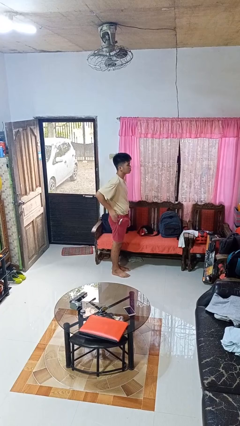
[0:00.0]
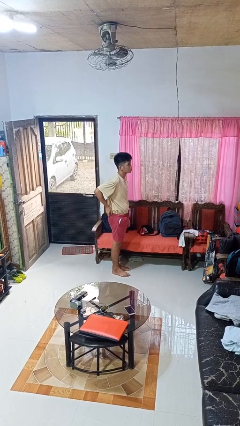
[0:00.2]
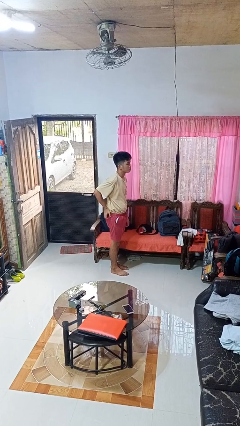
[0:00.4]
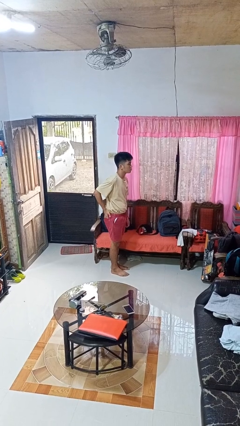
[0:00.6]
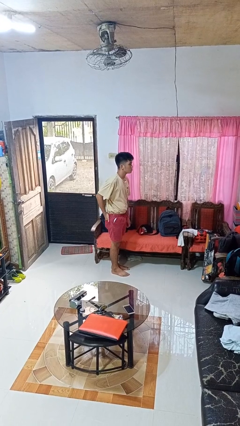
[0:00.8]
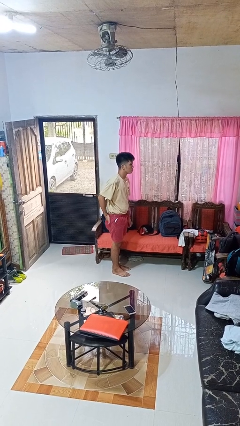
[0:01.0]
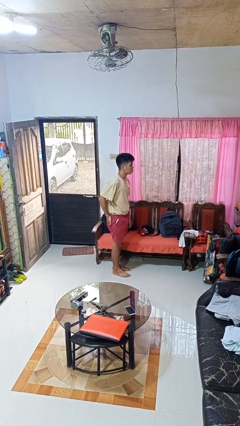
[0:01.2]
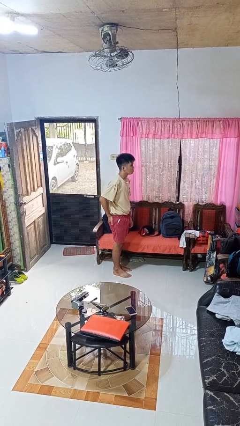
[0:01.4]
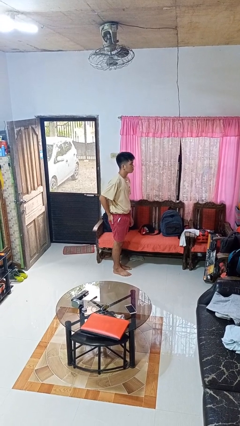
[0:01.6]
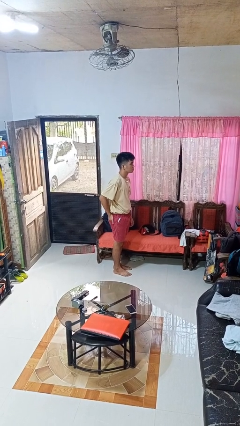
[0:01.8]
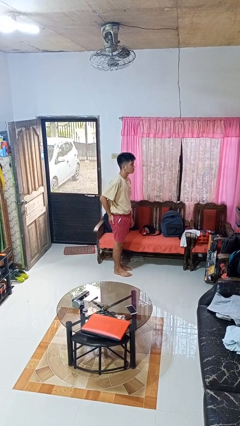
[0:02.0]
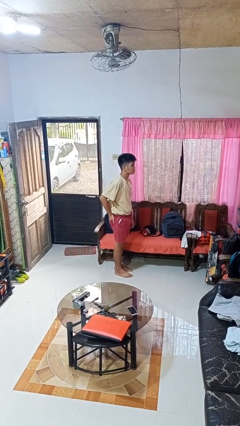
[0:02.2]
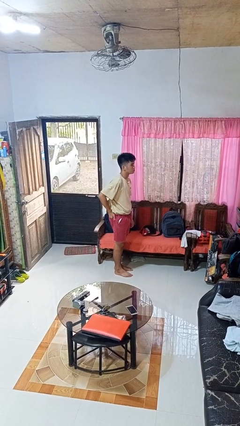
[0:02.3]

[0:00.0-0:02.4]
person puts hands in back pockets

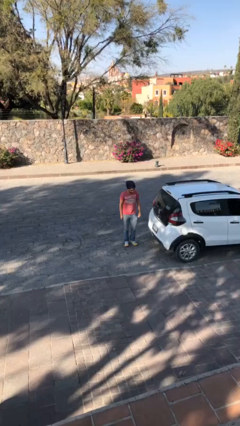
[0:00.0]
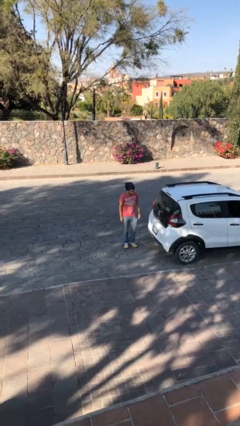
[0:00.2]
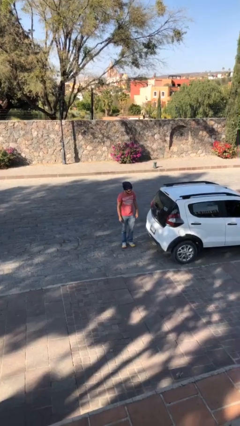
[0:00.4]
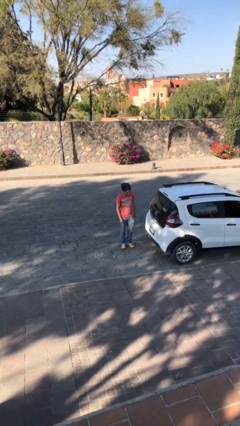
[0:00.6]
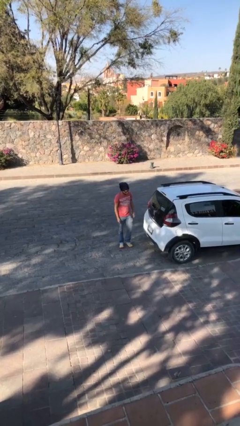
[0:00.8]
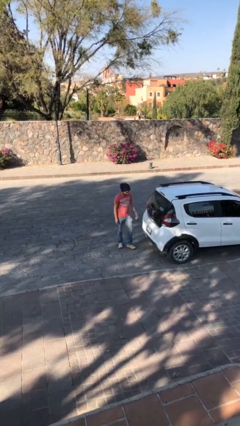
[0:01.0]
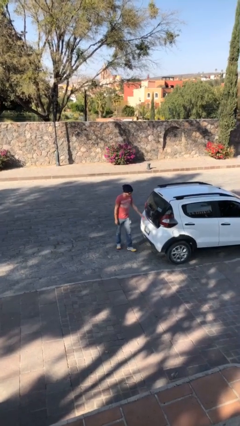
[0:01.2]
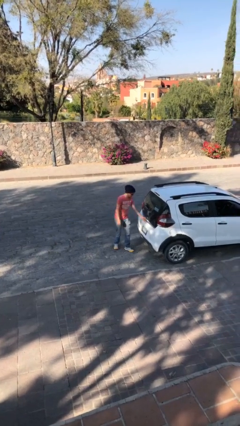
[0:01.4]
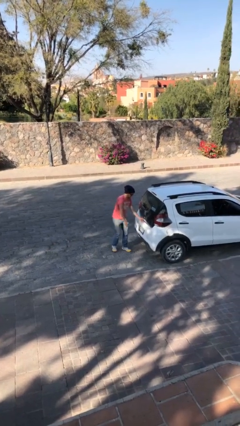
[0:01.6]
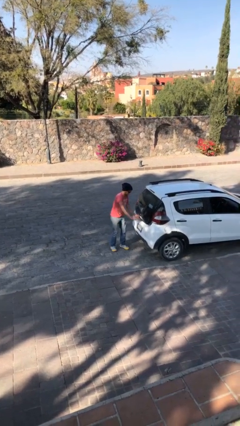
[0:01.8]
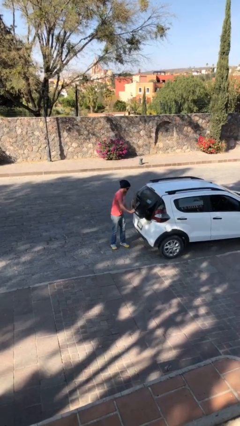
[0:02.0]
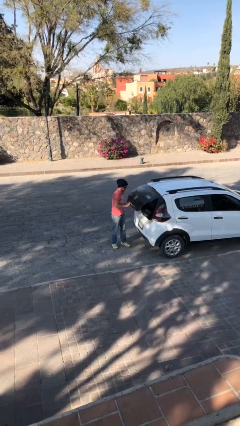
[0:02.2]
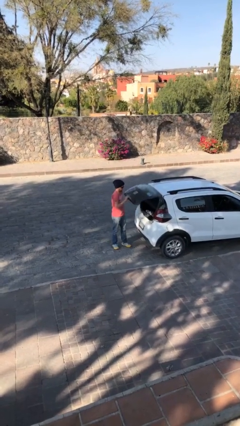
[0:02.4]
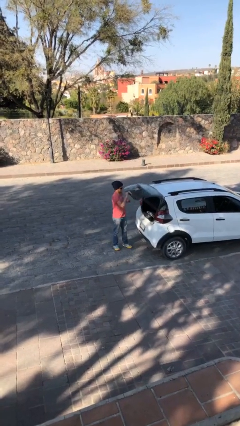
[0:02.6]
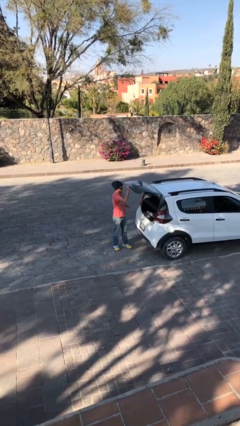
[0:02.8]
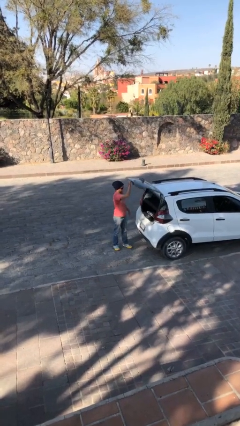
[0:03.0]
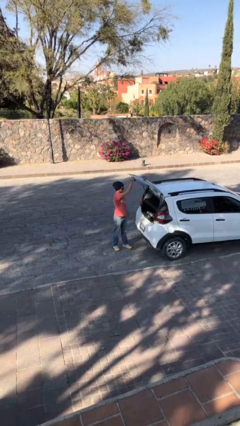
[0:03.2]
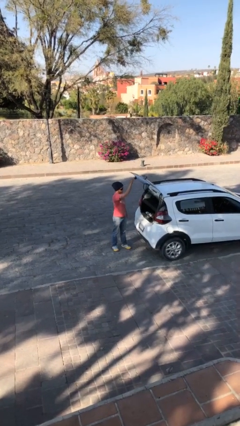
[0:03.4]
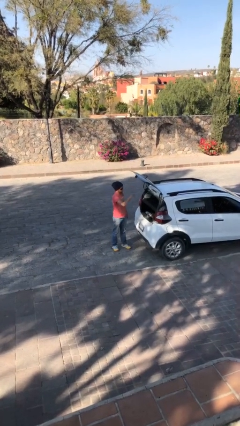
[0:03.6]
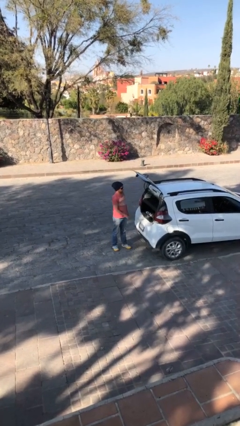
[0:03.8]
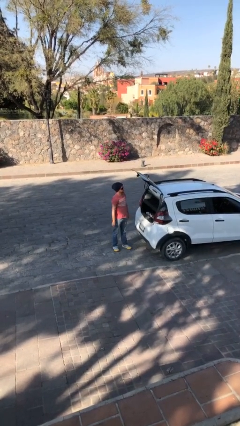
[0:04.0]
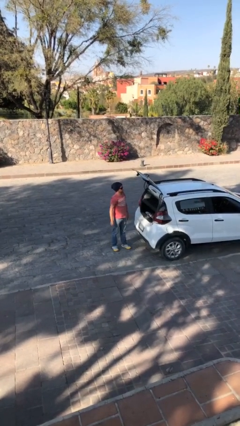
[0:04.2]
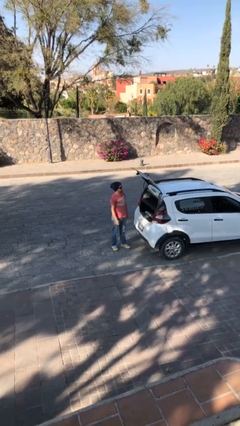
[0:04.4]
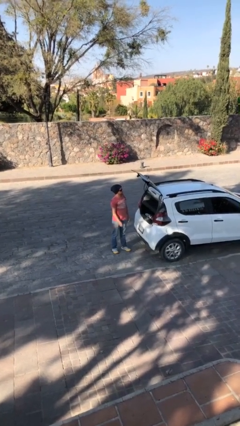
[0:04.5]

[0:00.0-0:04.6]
person opens car trunk

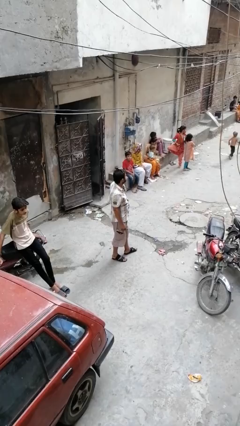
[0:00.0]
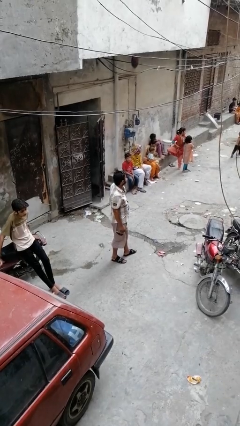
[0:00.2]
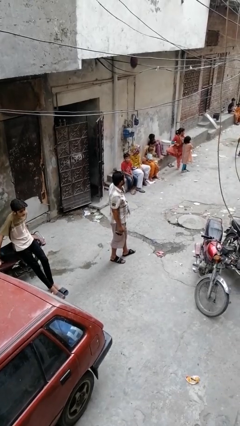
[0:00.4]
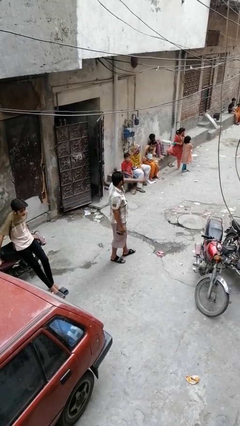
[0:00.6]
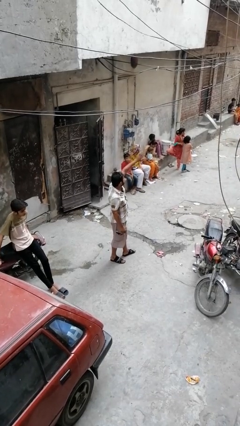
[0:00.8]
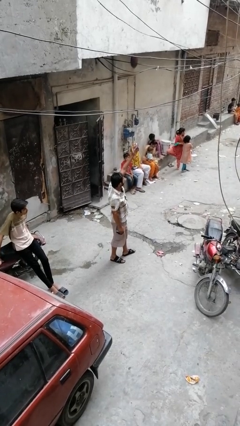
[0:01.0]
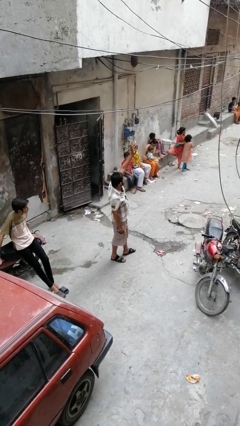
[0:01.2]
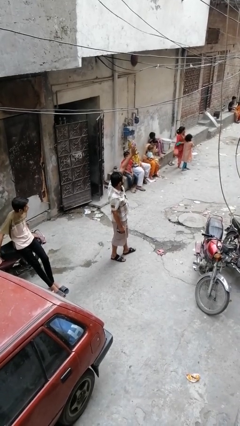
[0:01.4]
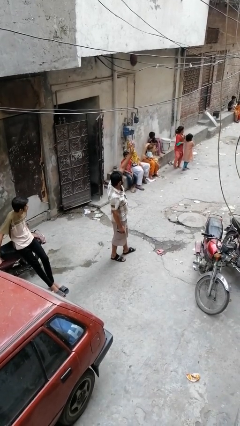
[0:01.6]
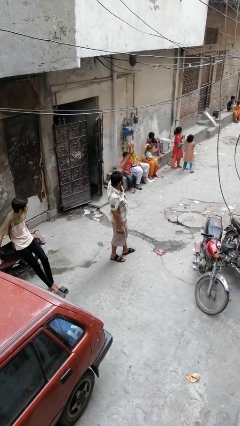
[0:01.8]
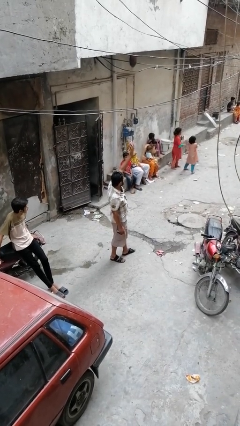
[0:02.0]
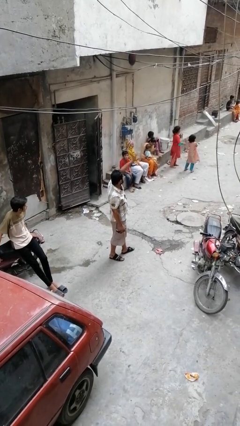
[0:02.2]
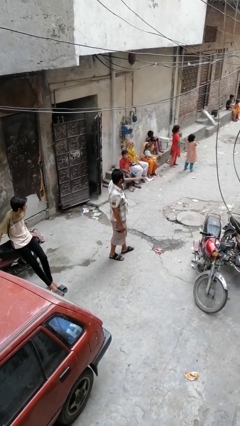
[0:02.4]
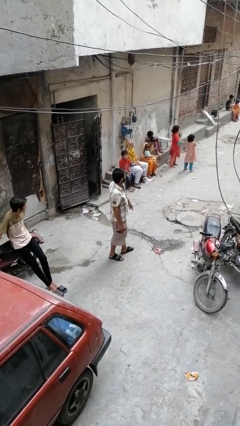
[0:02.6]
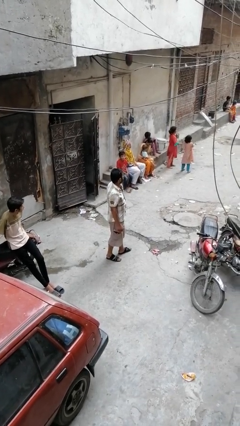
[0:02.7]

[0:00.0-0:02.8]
person waves at person

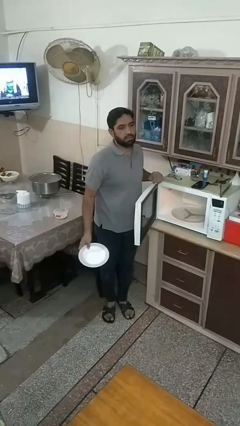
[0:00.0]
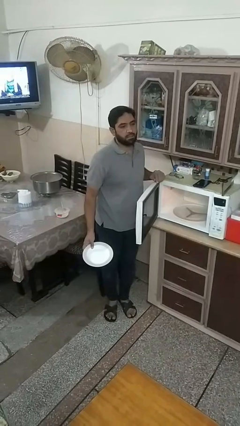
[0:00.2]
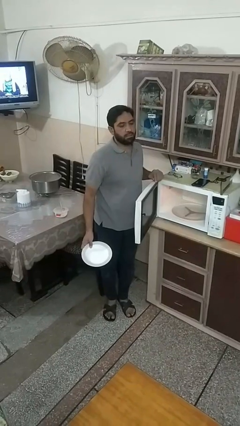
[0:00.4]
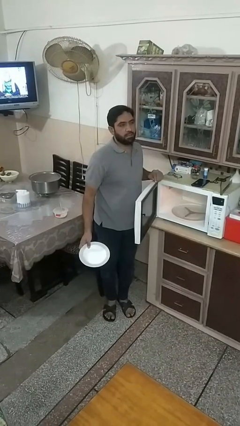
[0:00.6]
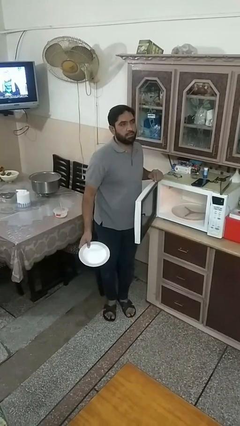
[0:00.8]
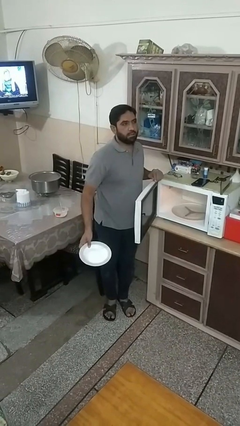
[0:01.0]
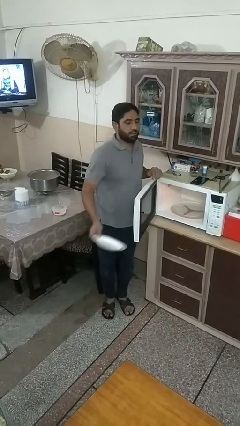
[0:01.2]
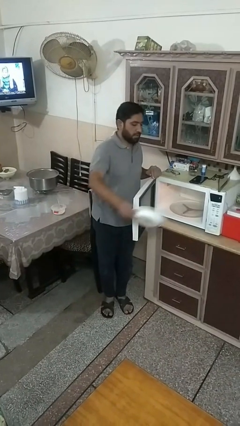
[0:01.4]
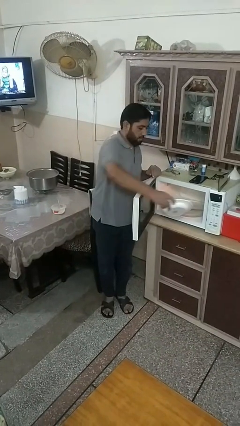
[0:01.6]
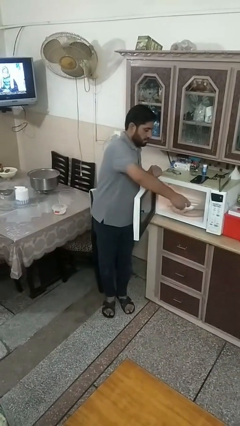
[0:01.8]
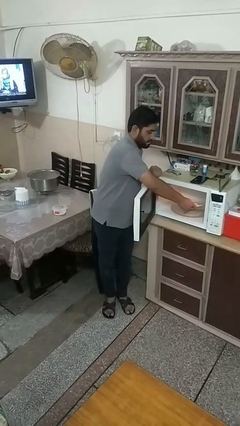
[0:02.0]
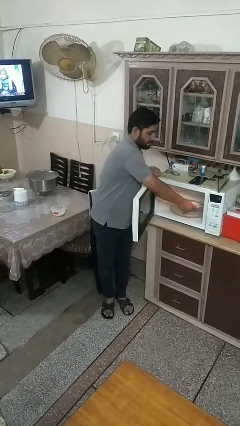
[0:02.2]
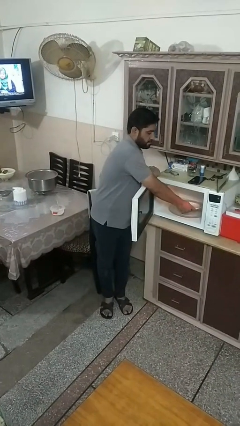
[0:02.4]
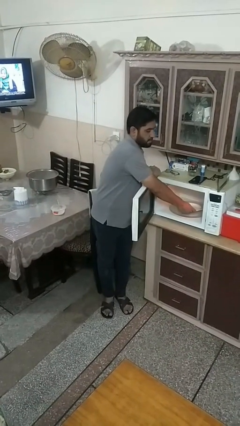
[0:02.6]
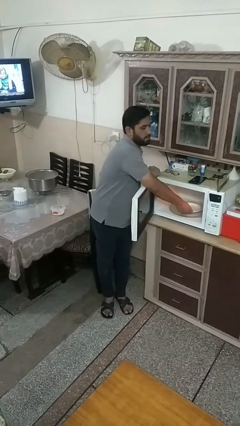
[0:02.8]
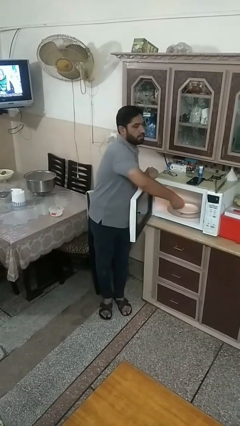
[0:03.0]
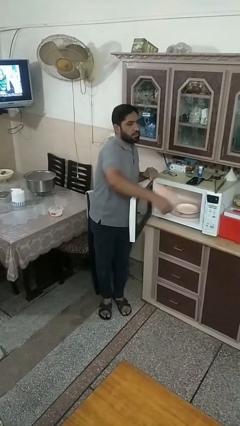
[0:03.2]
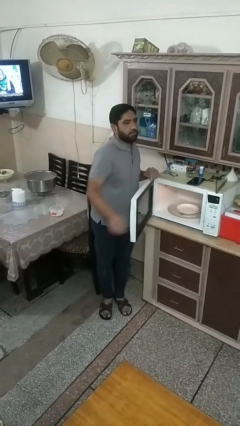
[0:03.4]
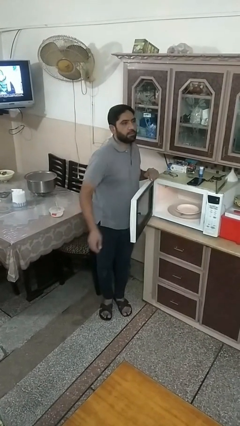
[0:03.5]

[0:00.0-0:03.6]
person puts object into microwave

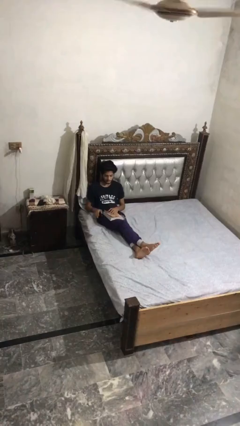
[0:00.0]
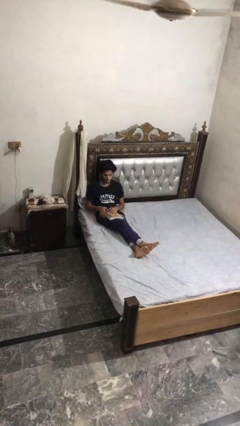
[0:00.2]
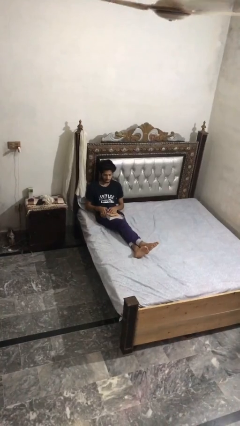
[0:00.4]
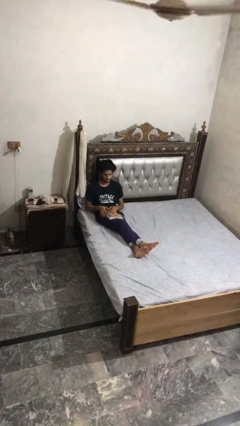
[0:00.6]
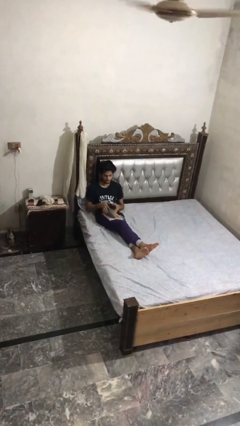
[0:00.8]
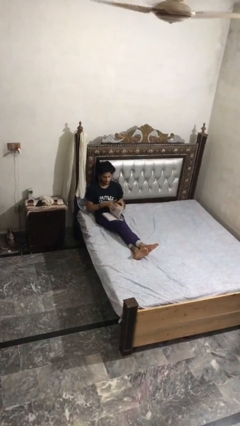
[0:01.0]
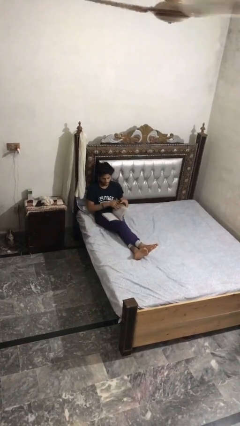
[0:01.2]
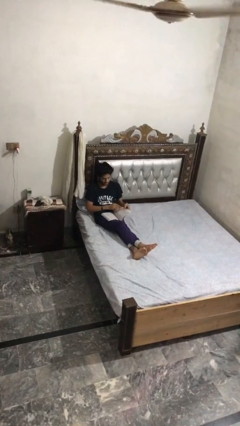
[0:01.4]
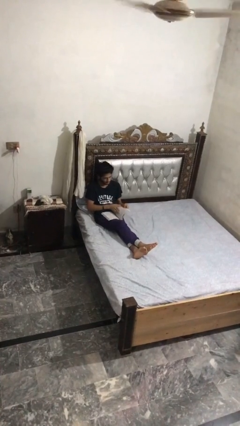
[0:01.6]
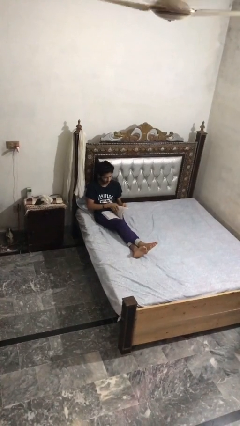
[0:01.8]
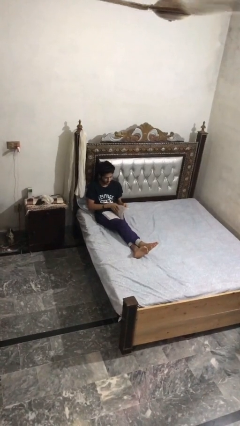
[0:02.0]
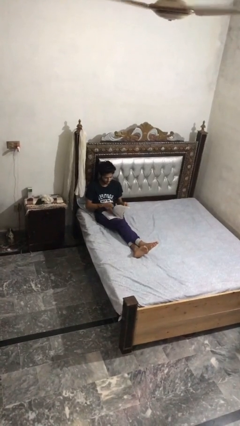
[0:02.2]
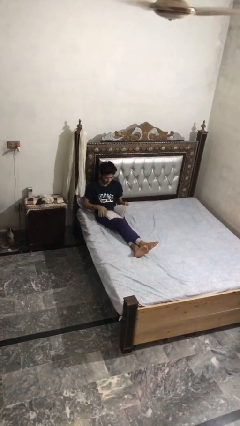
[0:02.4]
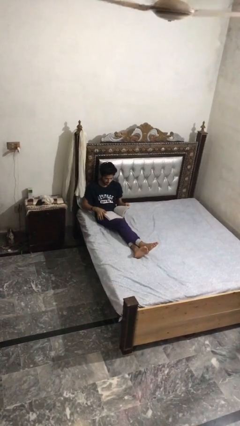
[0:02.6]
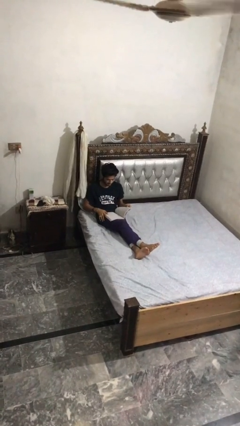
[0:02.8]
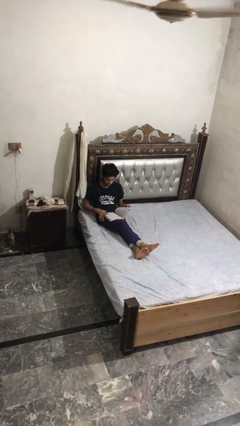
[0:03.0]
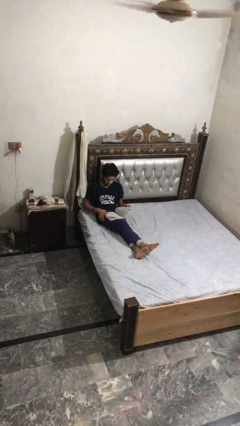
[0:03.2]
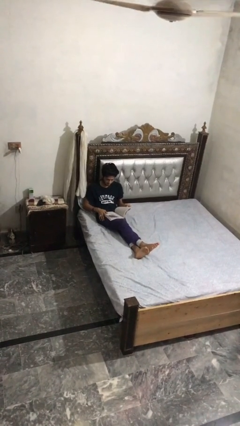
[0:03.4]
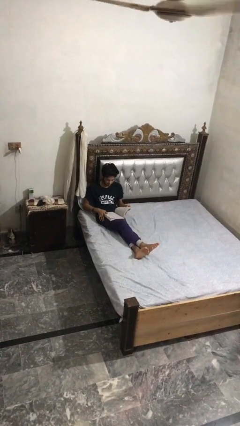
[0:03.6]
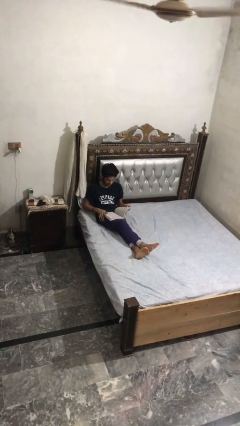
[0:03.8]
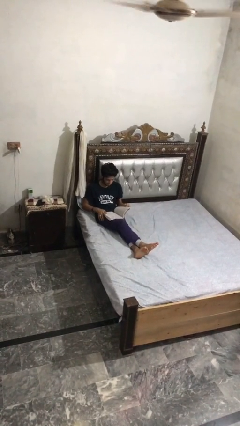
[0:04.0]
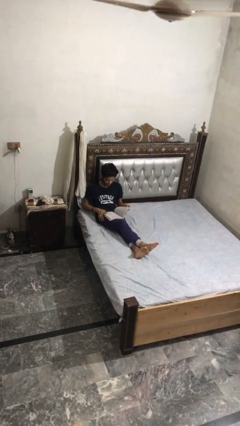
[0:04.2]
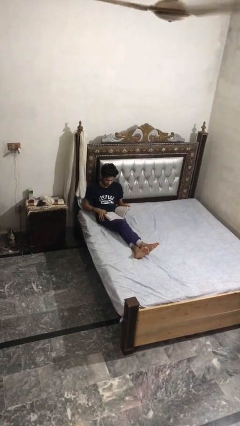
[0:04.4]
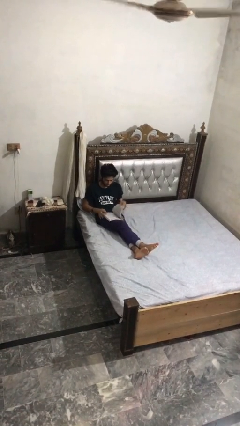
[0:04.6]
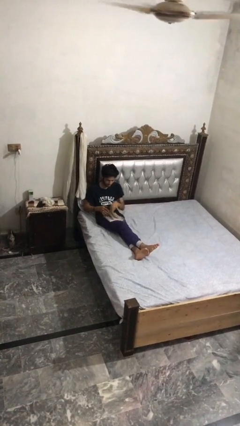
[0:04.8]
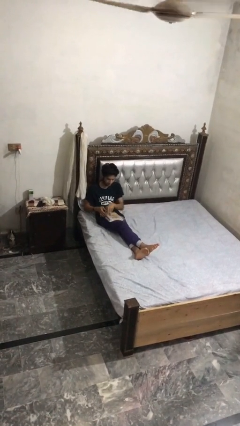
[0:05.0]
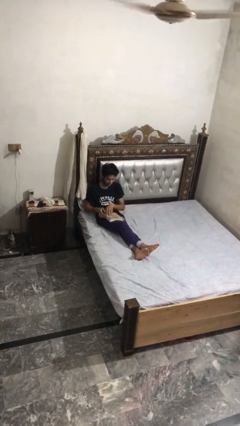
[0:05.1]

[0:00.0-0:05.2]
person reads book
